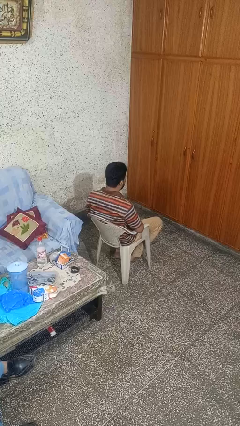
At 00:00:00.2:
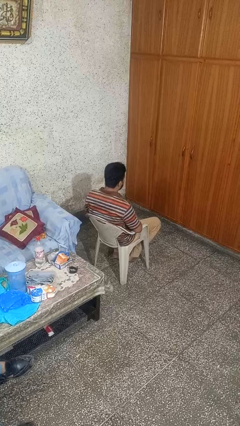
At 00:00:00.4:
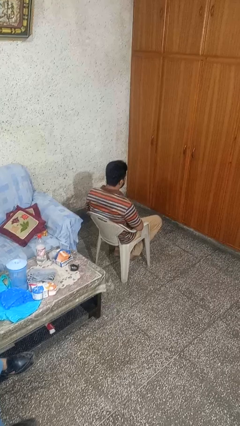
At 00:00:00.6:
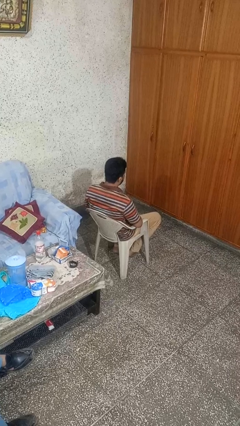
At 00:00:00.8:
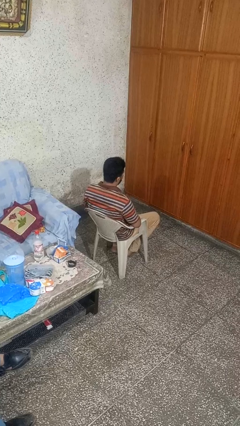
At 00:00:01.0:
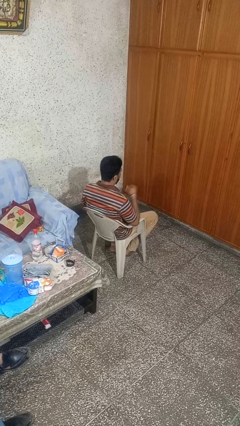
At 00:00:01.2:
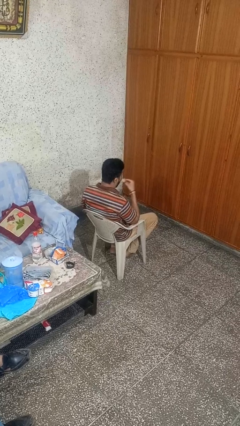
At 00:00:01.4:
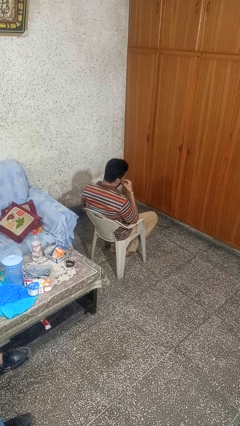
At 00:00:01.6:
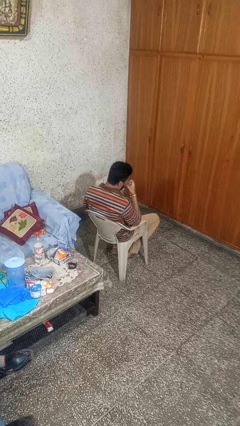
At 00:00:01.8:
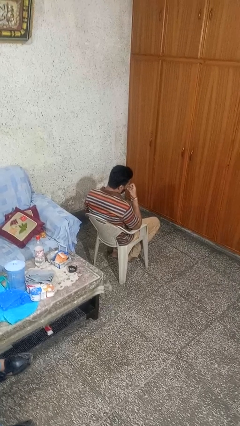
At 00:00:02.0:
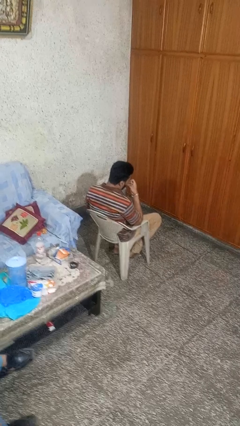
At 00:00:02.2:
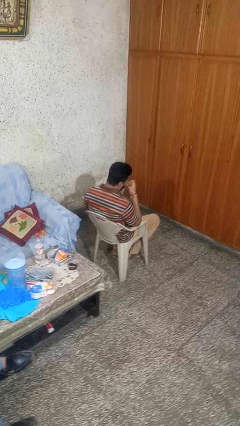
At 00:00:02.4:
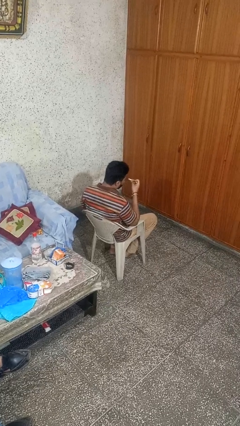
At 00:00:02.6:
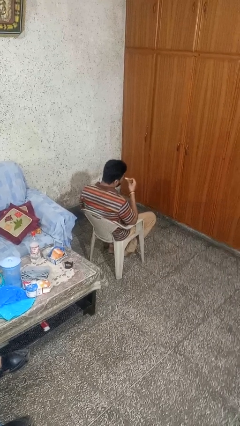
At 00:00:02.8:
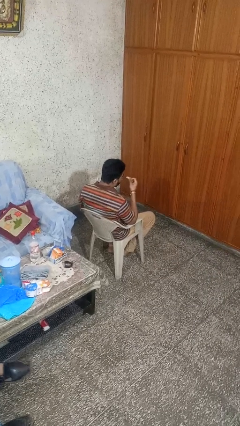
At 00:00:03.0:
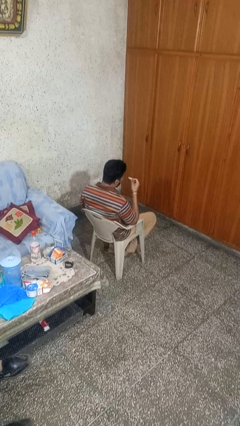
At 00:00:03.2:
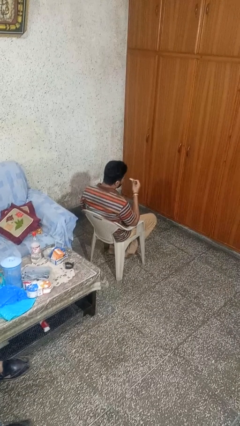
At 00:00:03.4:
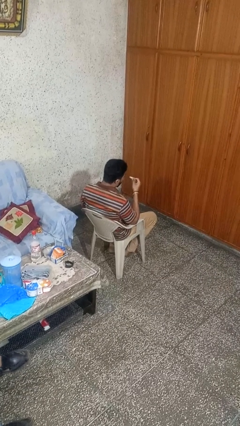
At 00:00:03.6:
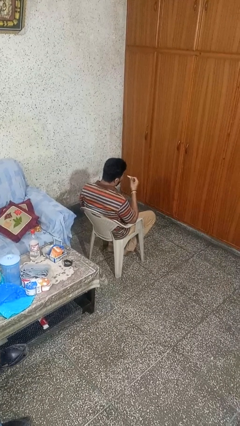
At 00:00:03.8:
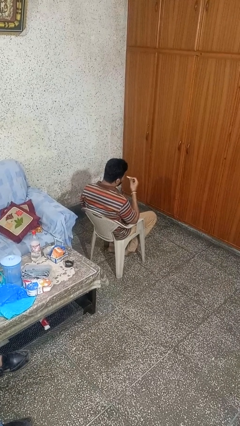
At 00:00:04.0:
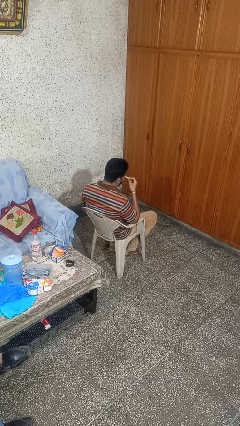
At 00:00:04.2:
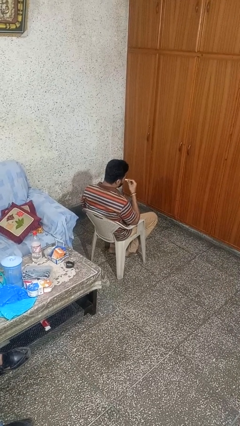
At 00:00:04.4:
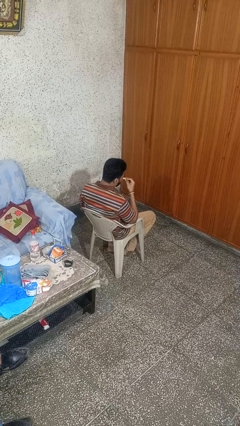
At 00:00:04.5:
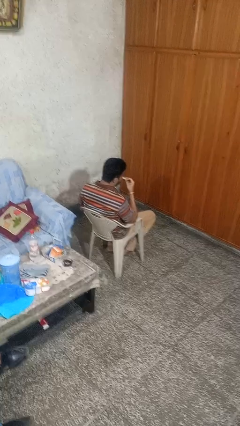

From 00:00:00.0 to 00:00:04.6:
person eats snack from bag

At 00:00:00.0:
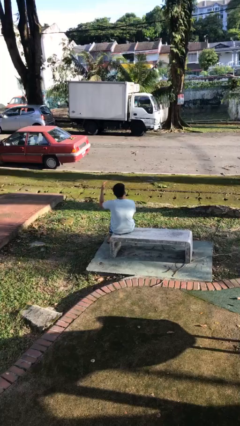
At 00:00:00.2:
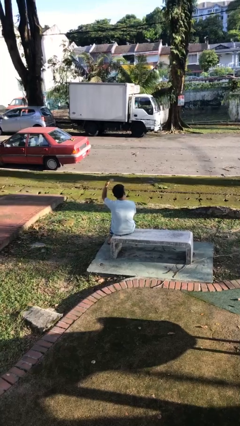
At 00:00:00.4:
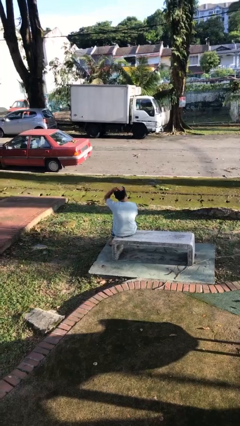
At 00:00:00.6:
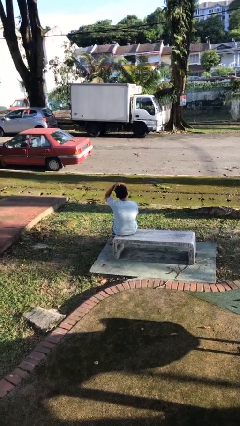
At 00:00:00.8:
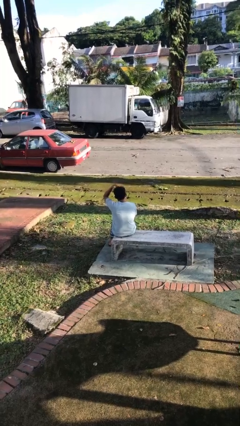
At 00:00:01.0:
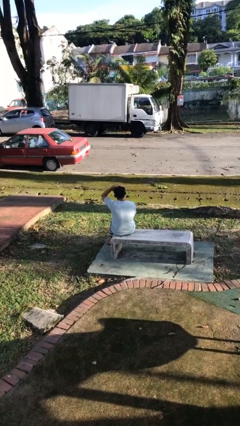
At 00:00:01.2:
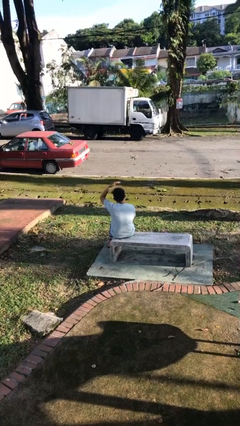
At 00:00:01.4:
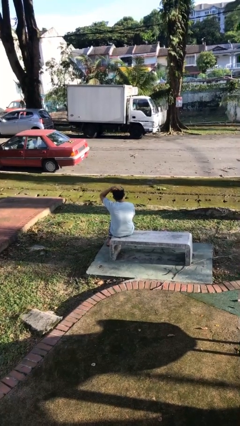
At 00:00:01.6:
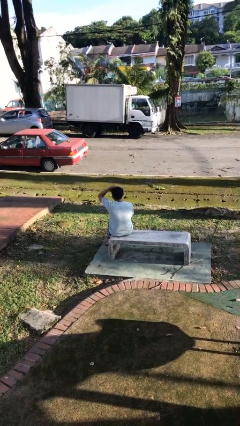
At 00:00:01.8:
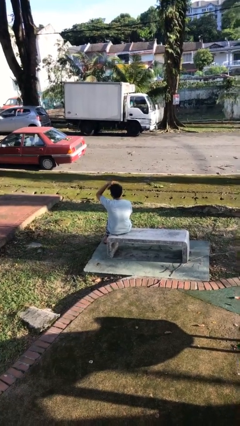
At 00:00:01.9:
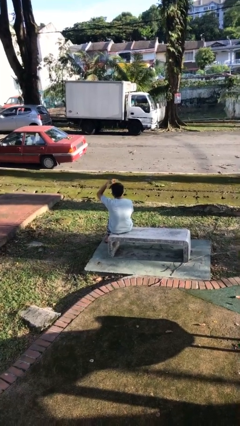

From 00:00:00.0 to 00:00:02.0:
person pats head

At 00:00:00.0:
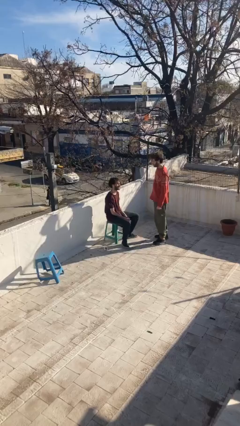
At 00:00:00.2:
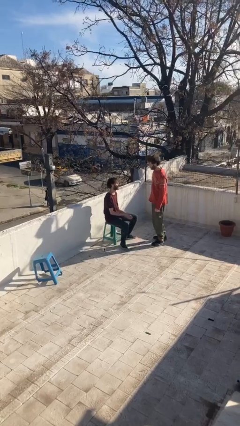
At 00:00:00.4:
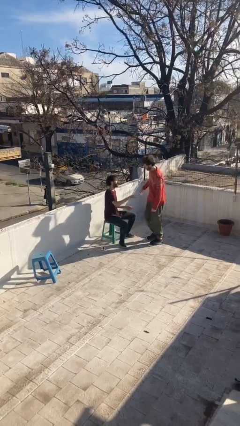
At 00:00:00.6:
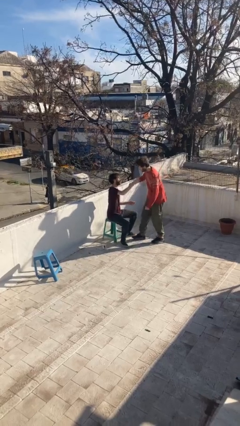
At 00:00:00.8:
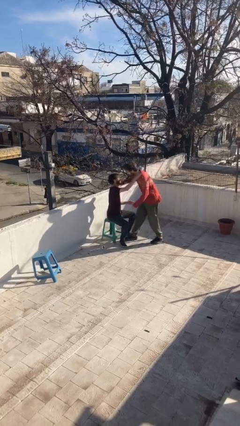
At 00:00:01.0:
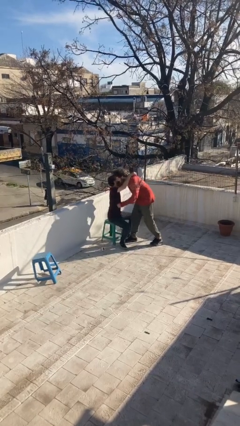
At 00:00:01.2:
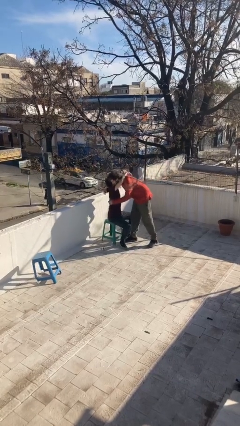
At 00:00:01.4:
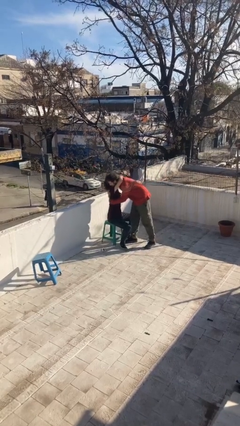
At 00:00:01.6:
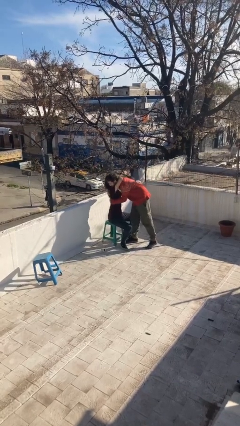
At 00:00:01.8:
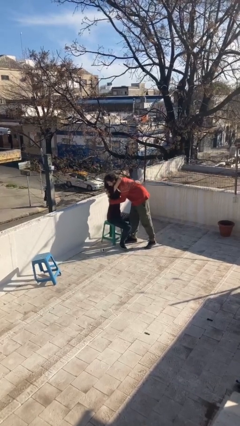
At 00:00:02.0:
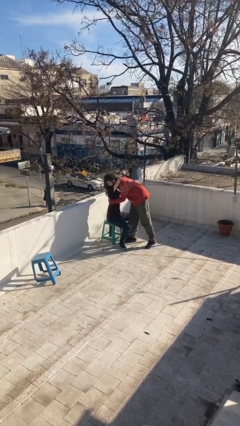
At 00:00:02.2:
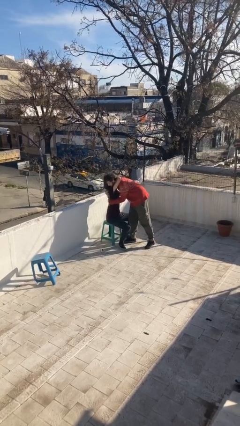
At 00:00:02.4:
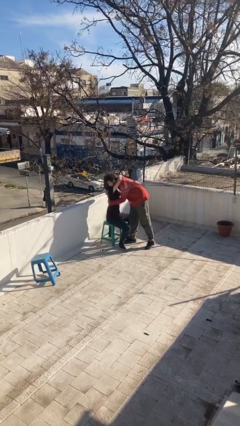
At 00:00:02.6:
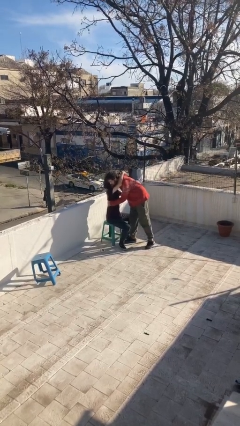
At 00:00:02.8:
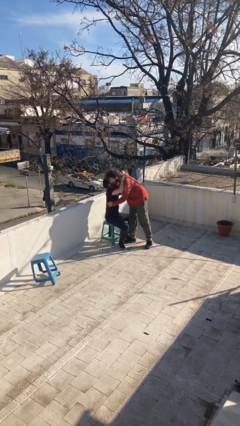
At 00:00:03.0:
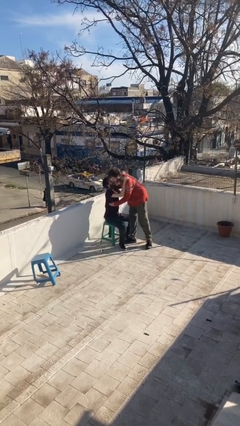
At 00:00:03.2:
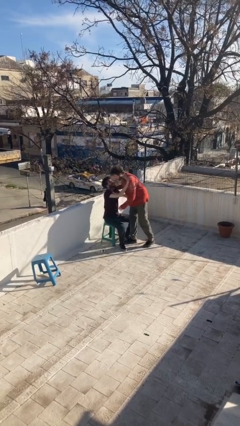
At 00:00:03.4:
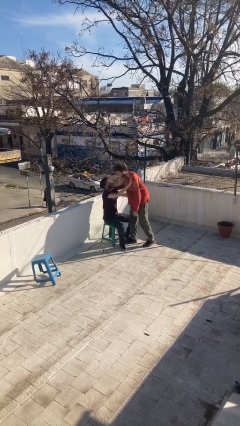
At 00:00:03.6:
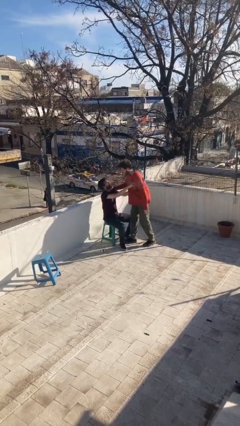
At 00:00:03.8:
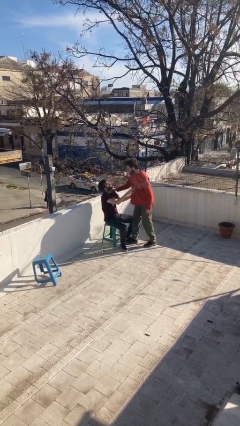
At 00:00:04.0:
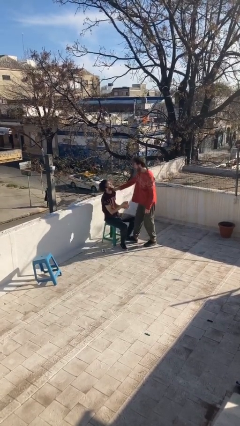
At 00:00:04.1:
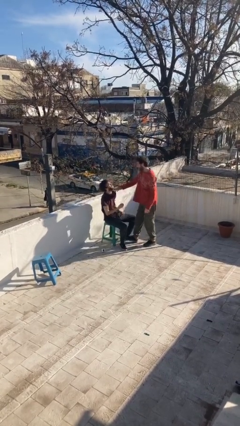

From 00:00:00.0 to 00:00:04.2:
person embraces person

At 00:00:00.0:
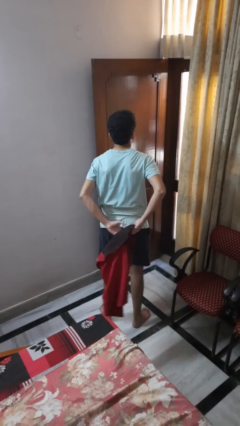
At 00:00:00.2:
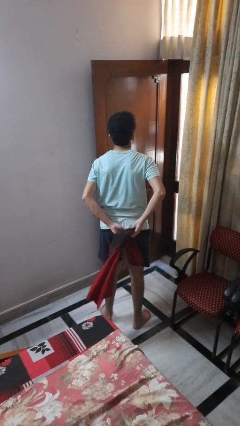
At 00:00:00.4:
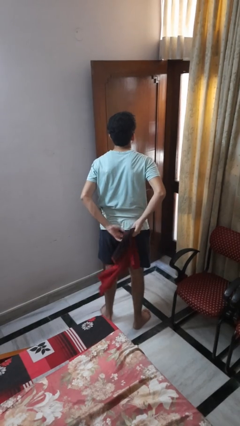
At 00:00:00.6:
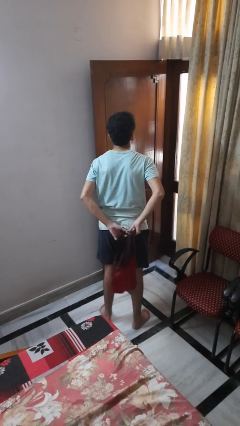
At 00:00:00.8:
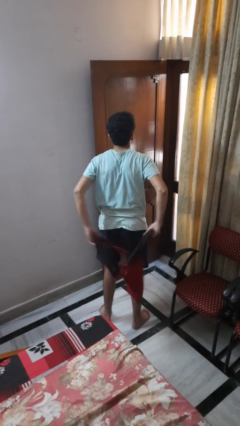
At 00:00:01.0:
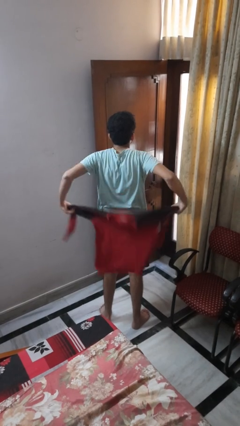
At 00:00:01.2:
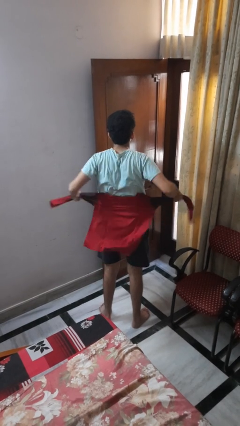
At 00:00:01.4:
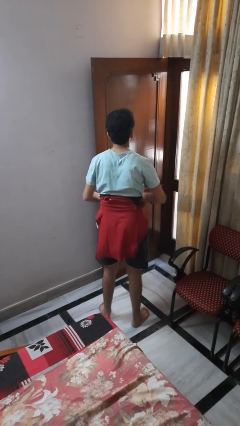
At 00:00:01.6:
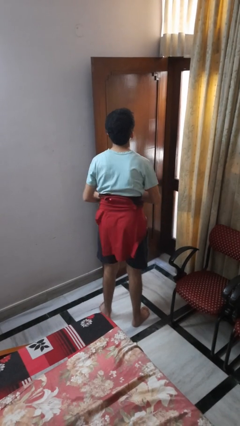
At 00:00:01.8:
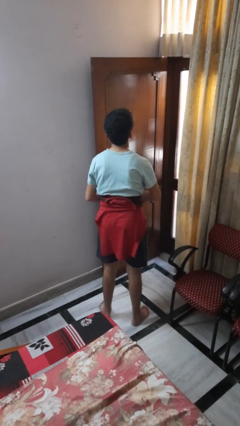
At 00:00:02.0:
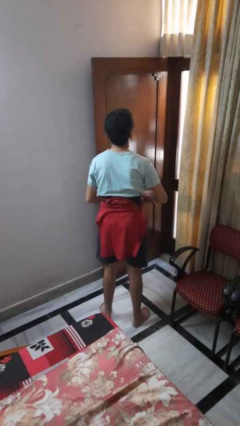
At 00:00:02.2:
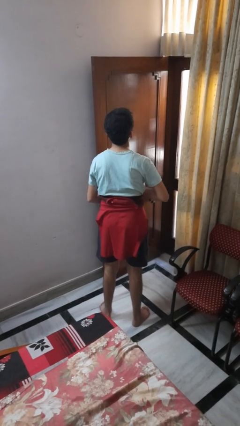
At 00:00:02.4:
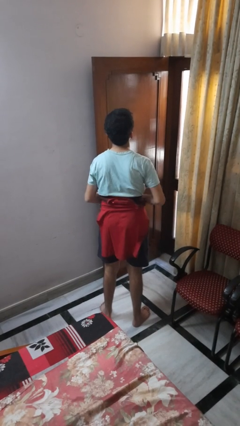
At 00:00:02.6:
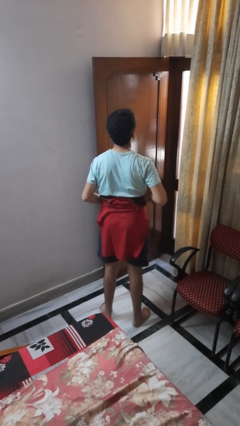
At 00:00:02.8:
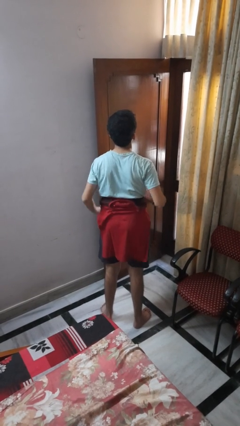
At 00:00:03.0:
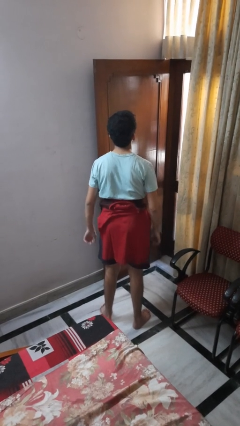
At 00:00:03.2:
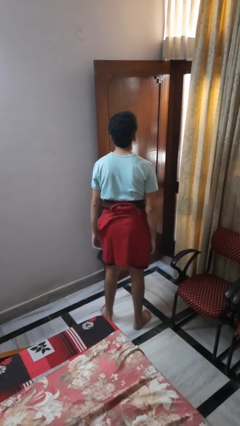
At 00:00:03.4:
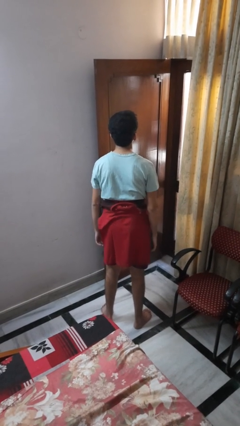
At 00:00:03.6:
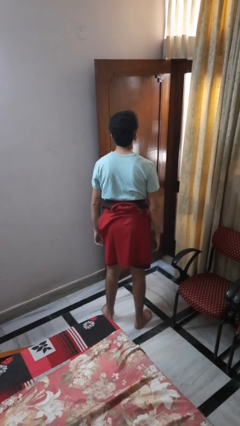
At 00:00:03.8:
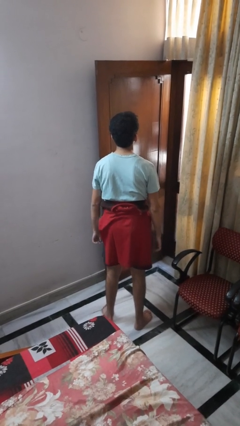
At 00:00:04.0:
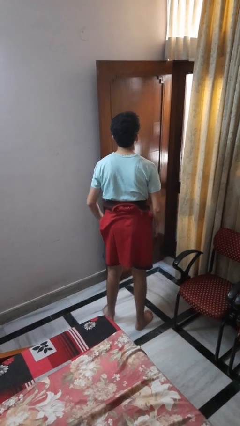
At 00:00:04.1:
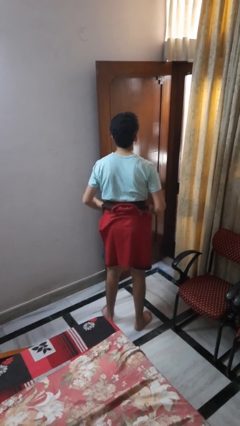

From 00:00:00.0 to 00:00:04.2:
person ties jacket around waist

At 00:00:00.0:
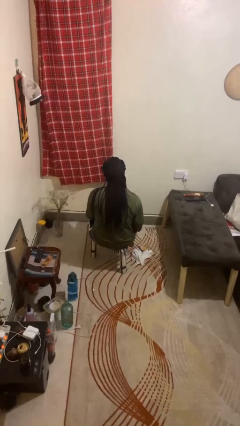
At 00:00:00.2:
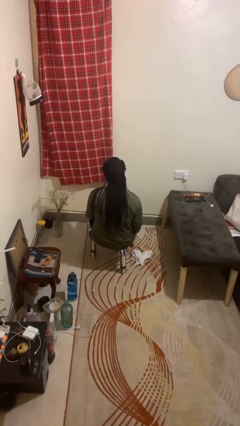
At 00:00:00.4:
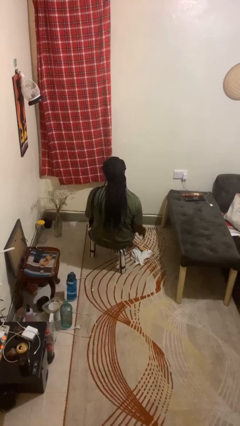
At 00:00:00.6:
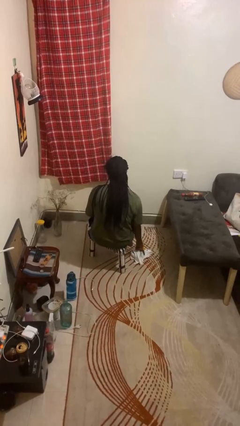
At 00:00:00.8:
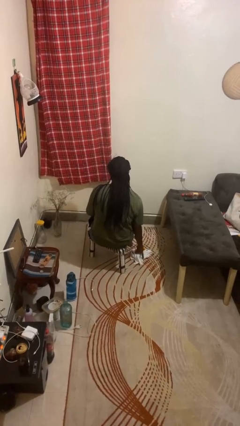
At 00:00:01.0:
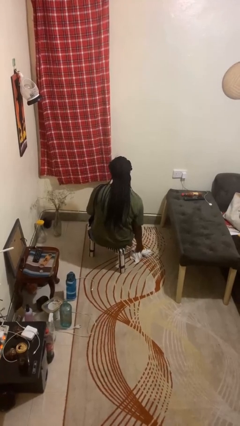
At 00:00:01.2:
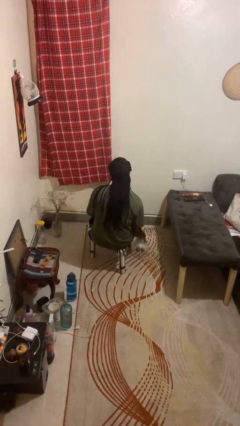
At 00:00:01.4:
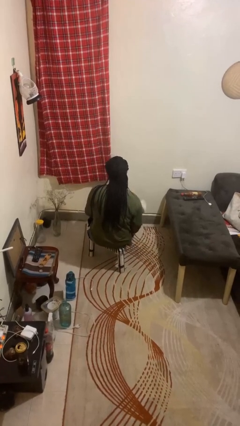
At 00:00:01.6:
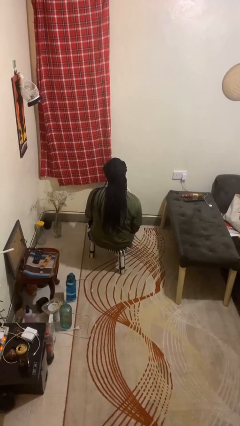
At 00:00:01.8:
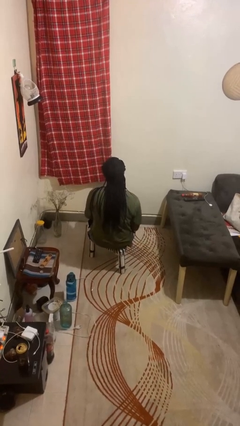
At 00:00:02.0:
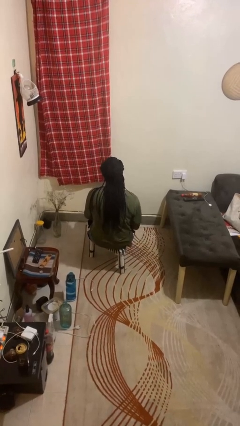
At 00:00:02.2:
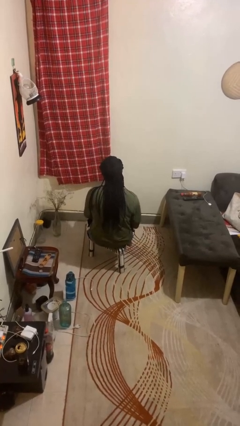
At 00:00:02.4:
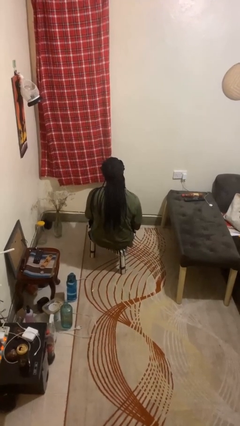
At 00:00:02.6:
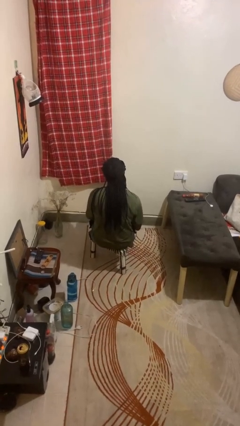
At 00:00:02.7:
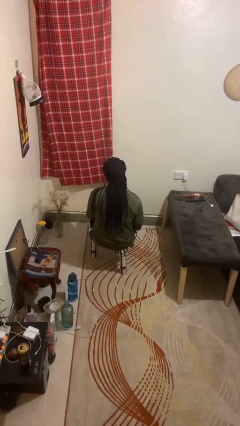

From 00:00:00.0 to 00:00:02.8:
person picks up object from floor
